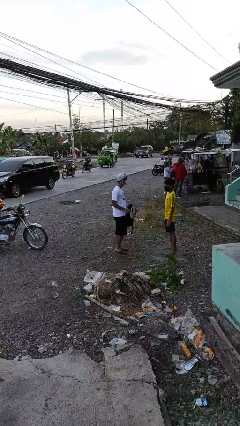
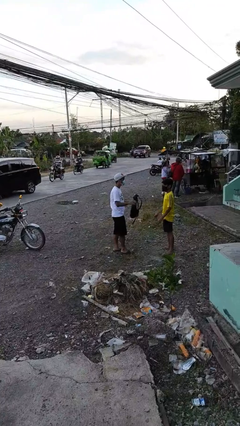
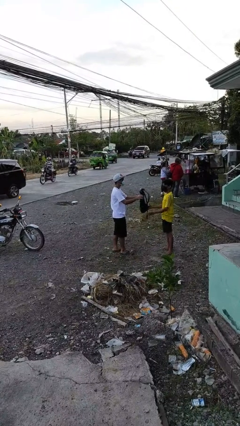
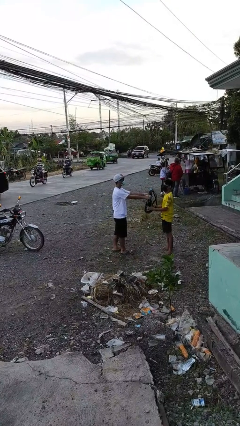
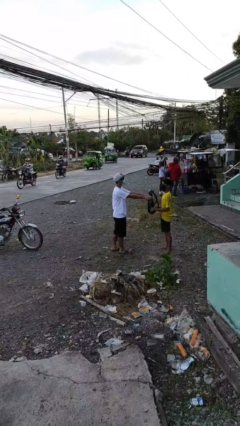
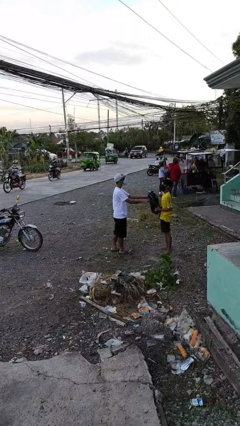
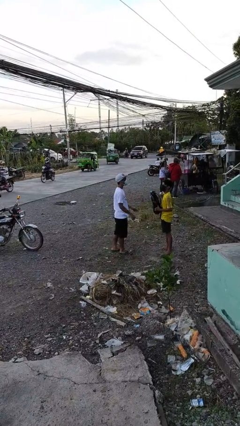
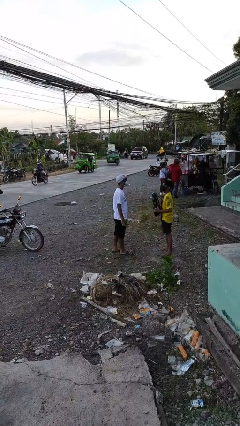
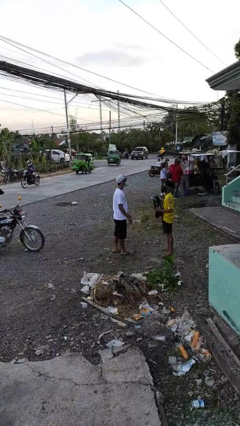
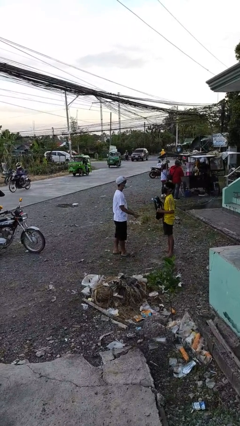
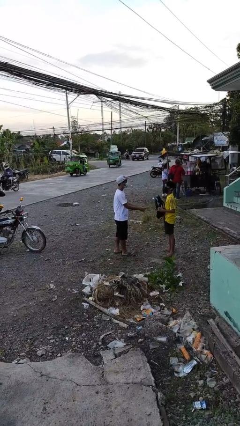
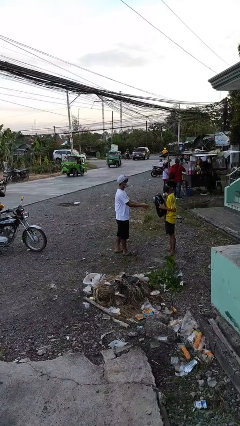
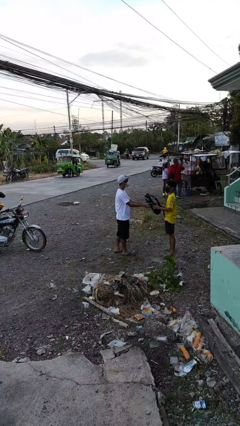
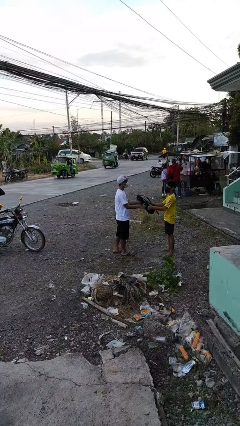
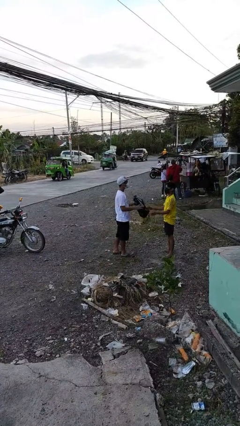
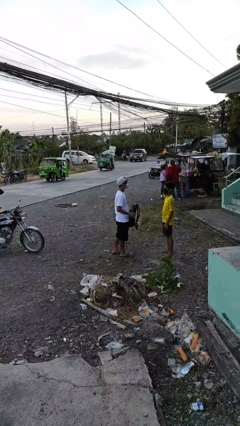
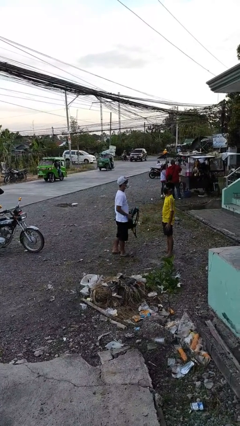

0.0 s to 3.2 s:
person transfers object to person

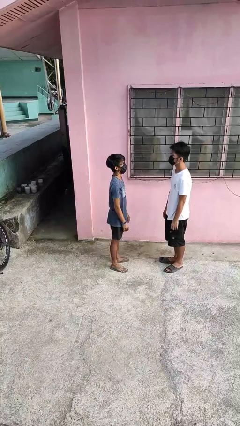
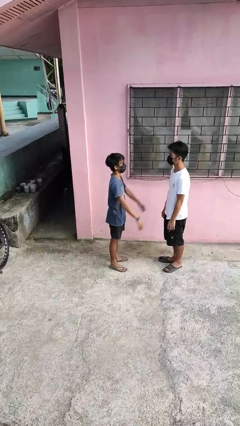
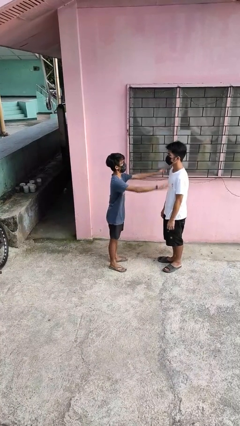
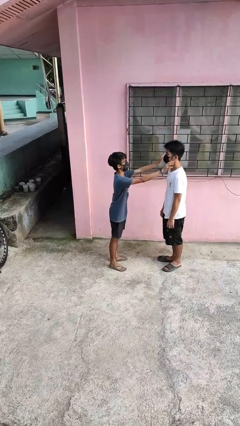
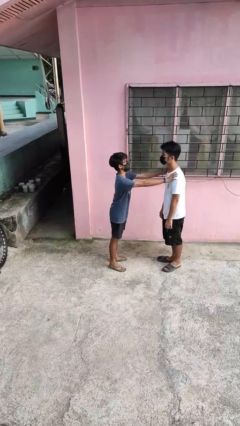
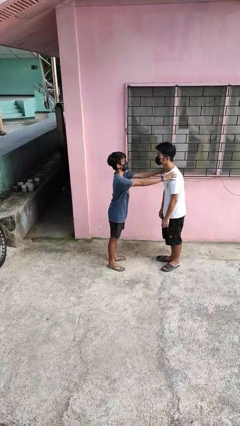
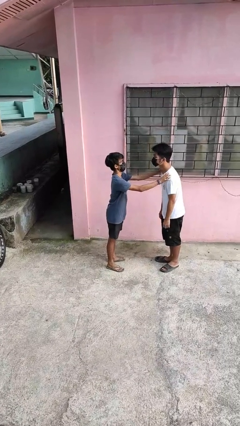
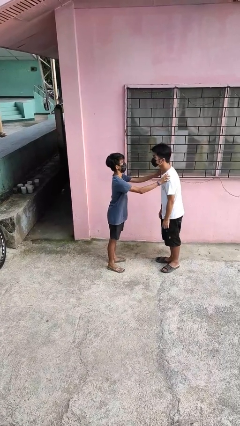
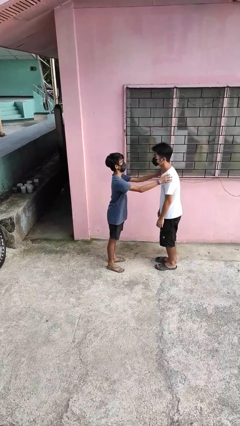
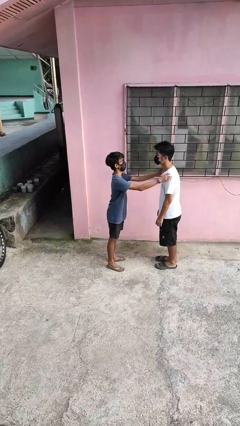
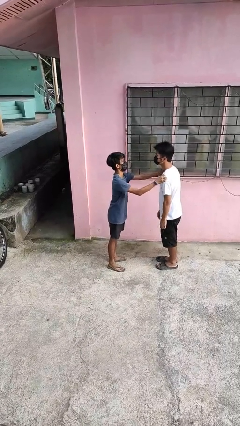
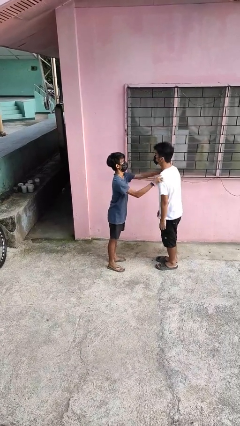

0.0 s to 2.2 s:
person grabs person by shoulder

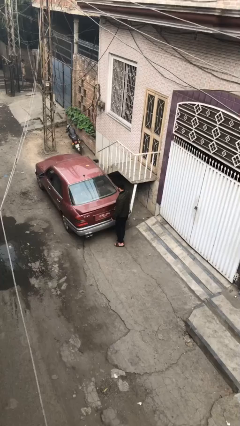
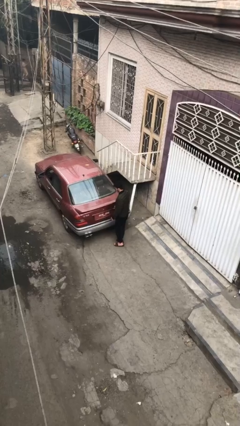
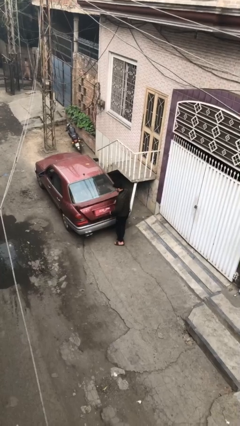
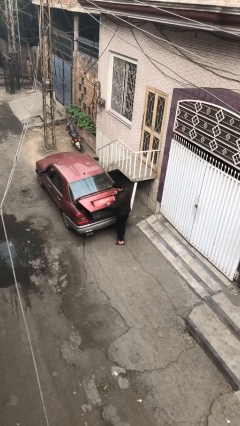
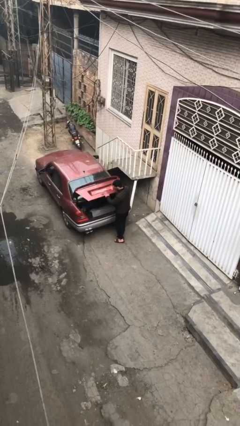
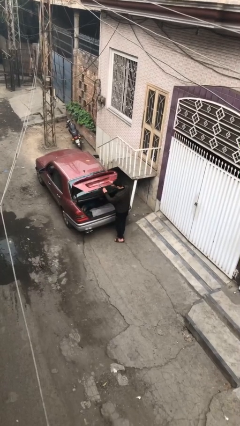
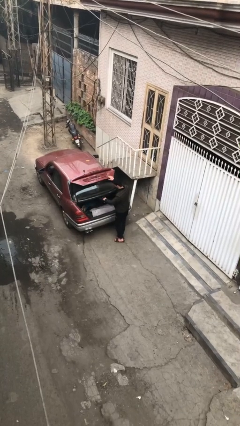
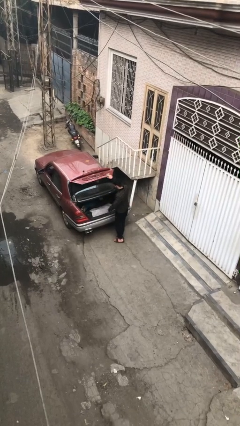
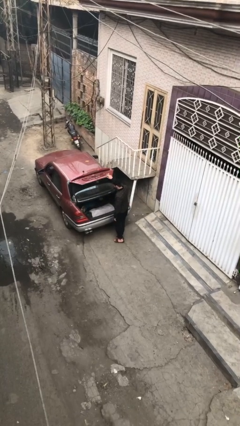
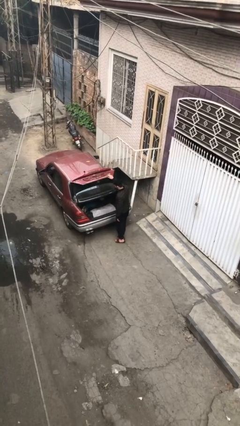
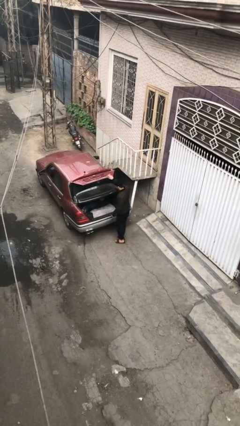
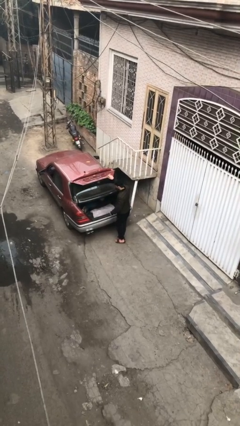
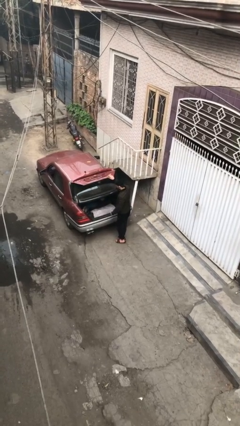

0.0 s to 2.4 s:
person opens car trunk

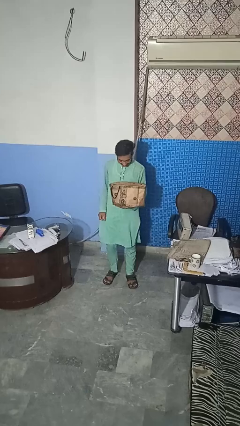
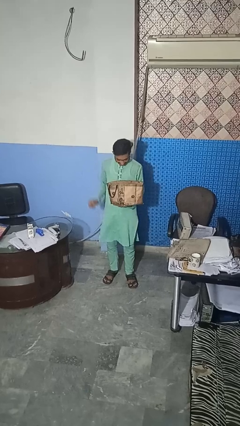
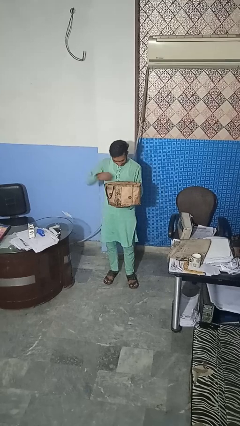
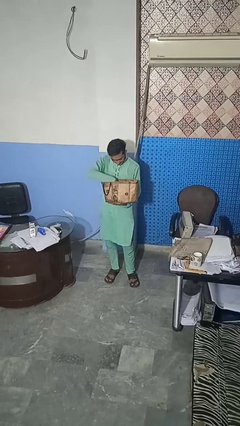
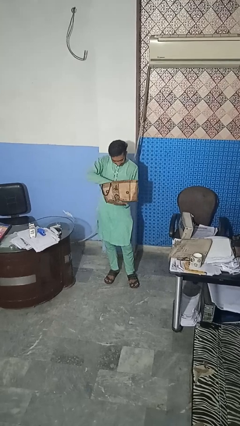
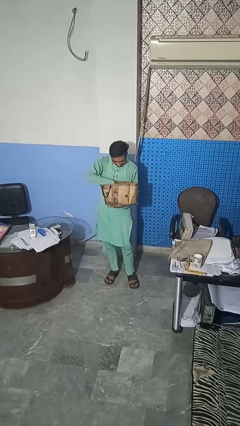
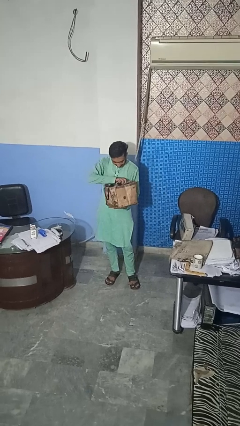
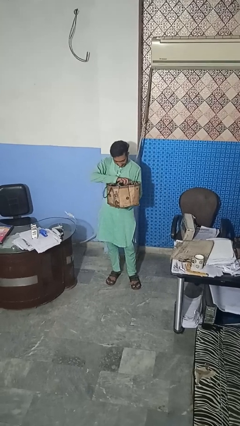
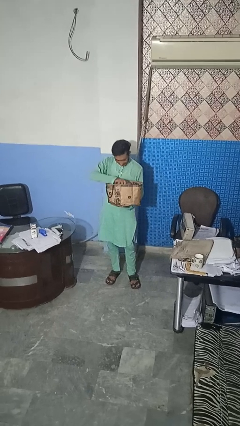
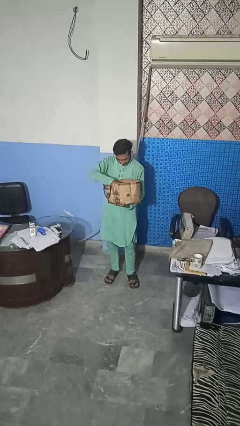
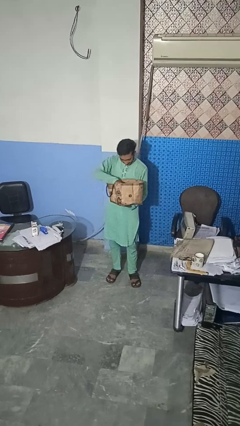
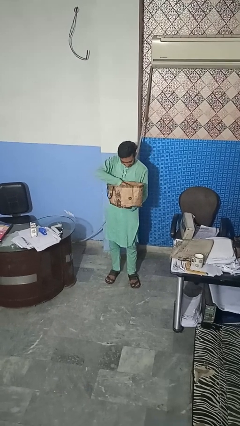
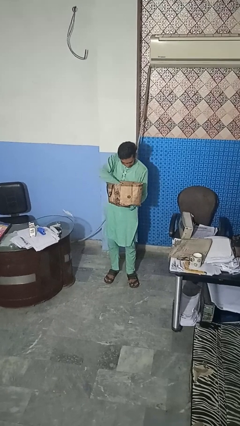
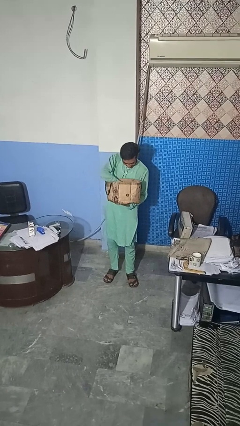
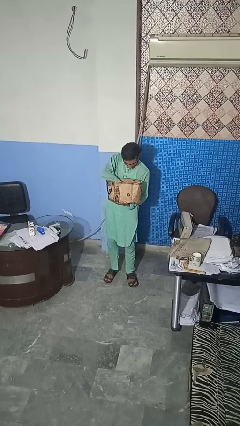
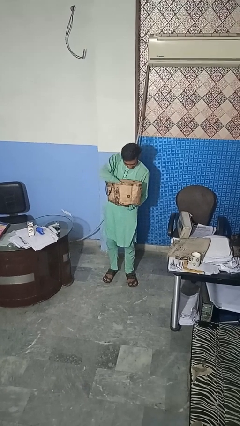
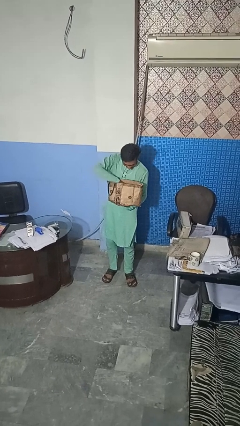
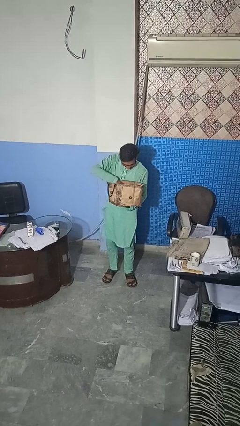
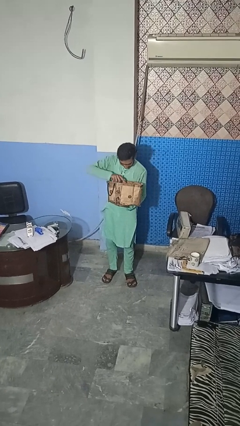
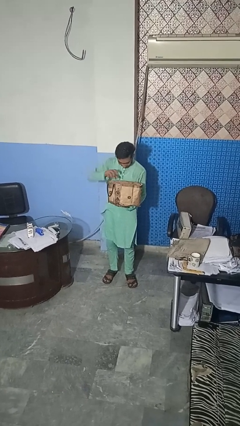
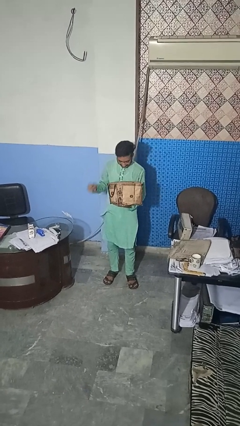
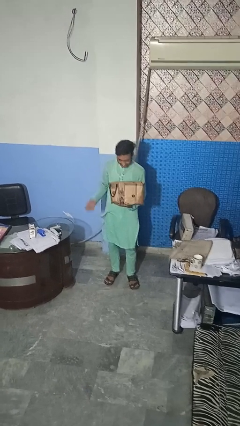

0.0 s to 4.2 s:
person searches in bag

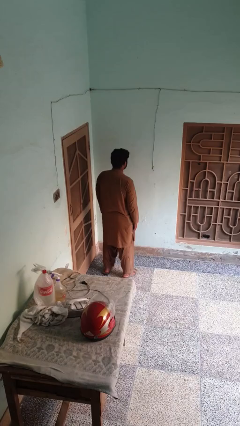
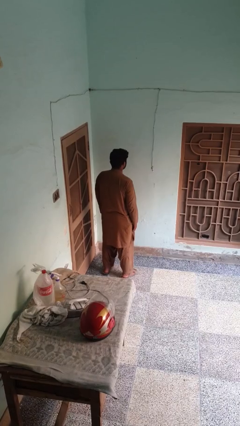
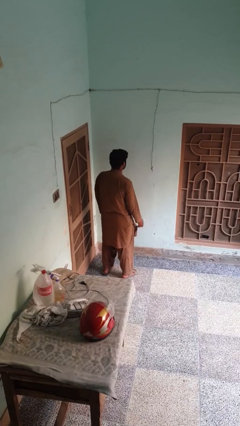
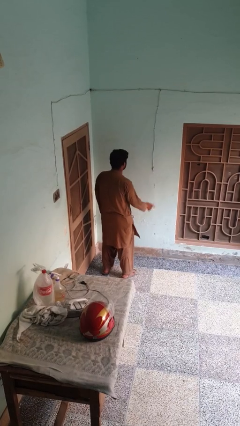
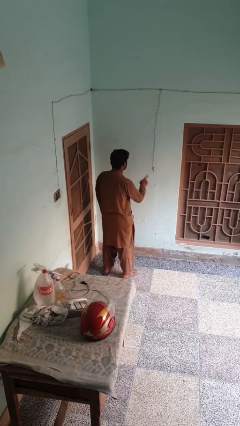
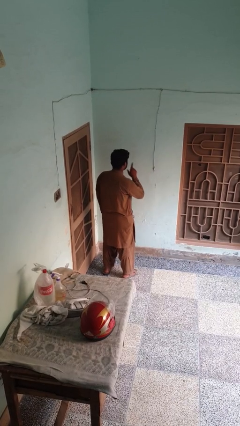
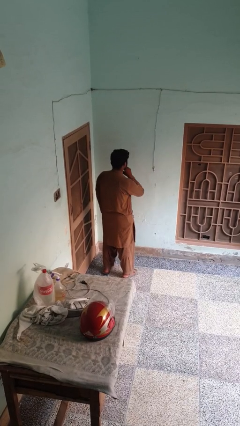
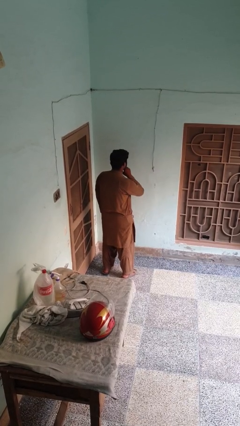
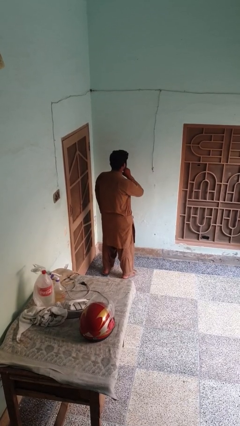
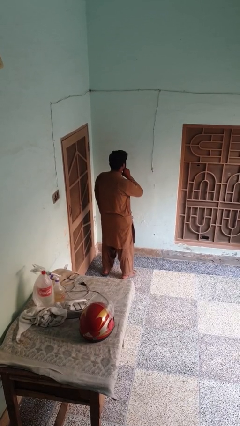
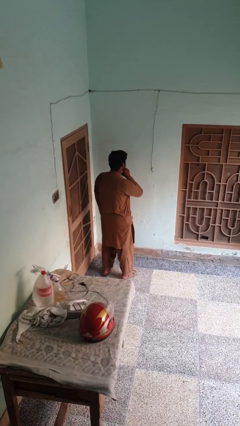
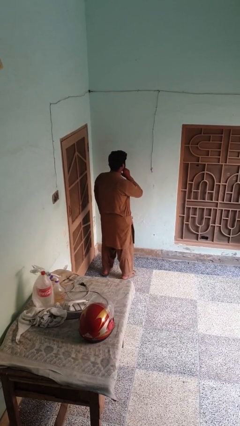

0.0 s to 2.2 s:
person gestures be quiet

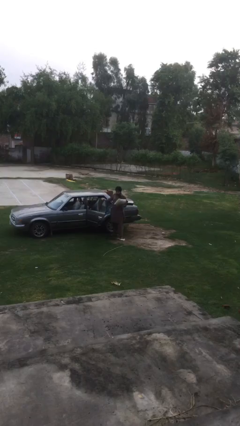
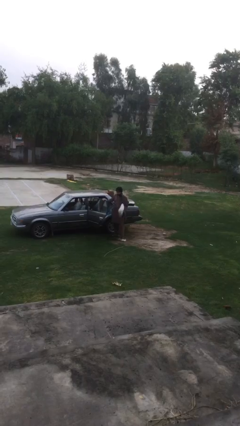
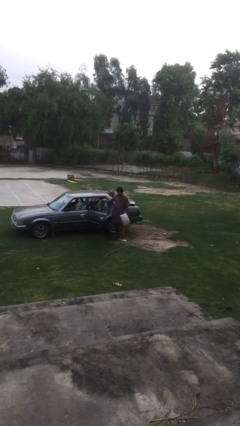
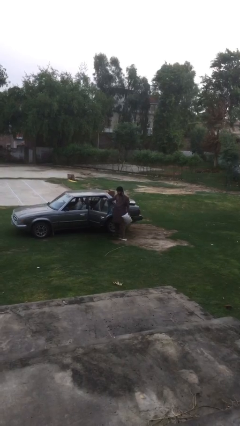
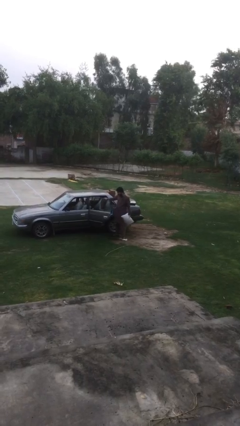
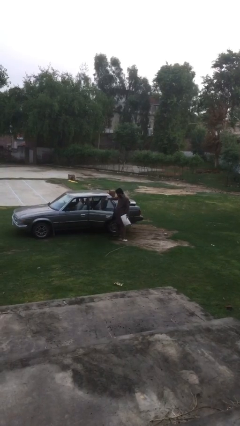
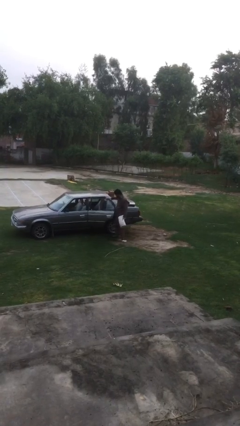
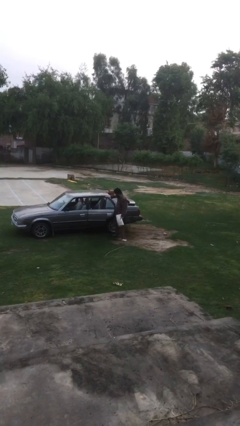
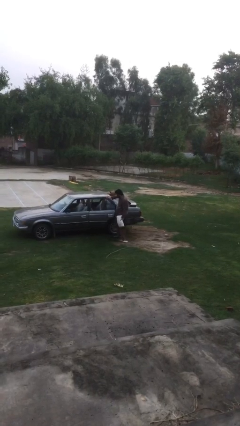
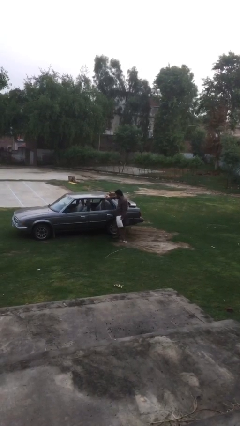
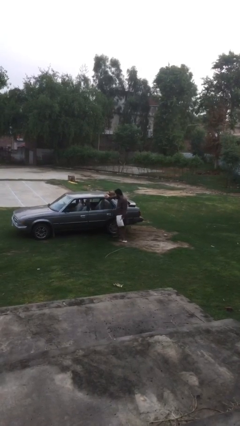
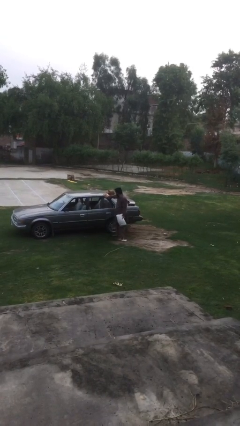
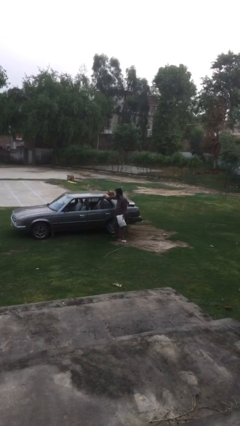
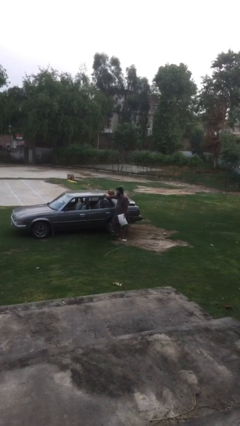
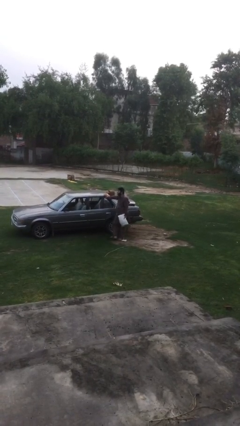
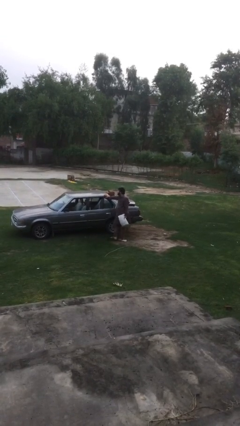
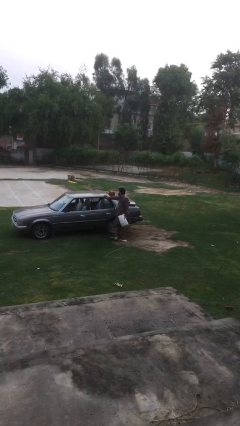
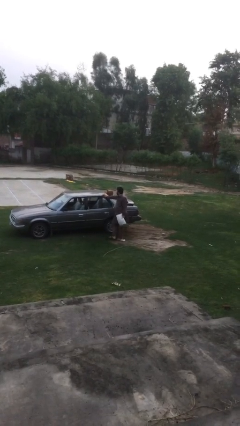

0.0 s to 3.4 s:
person closes car door
